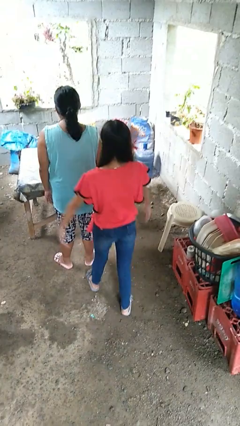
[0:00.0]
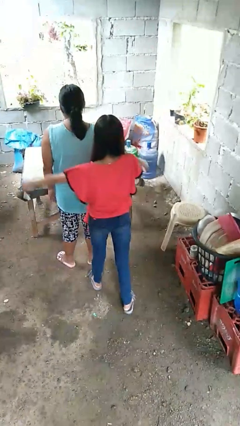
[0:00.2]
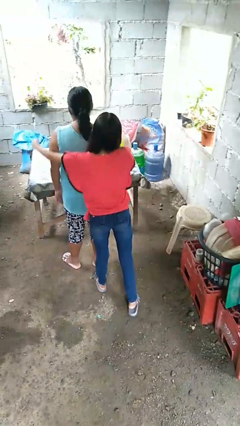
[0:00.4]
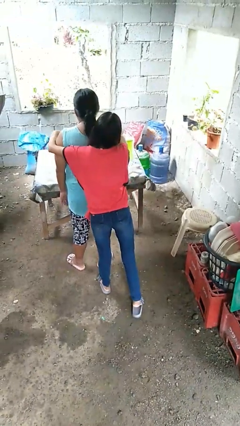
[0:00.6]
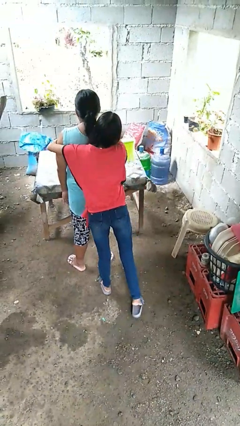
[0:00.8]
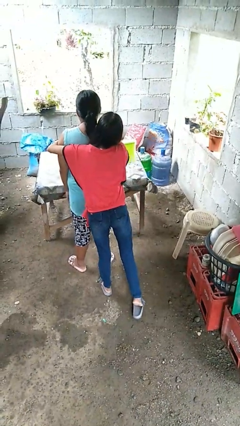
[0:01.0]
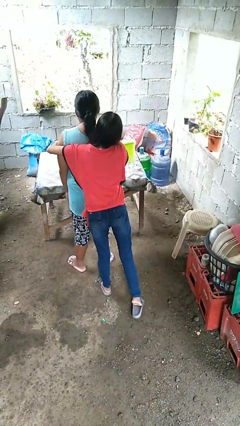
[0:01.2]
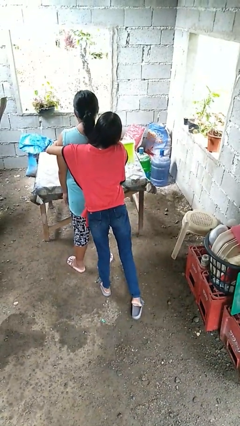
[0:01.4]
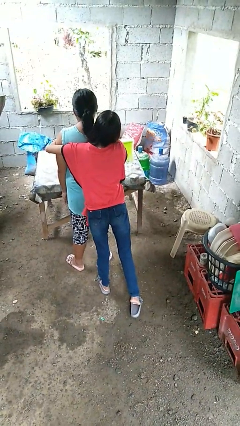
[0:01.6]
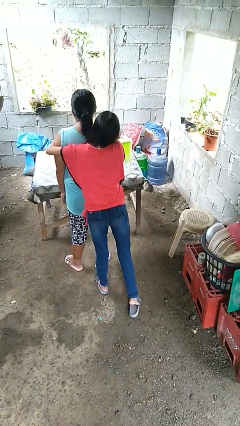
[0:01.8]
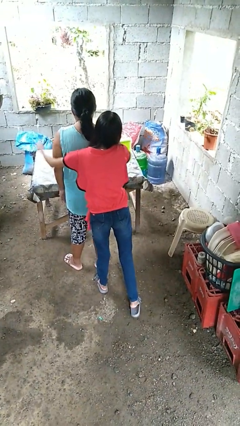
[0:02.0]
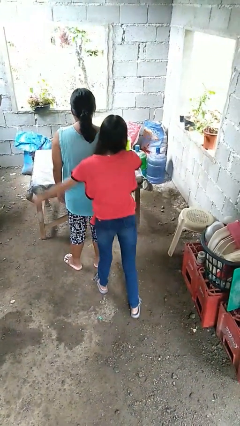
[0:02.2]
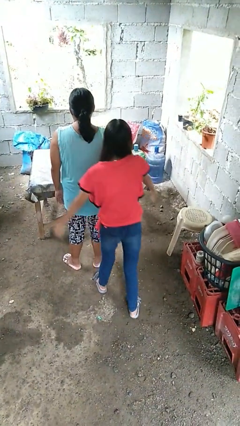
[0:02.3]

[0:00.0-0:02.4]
person hugs person from behind

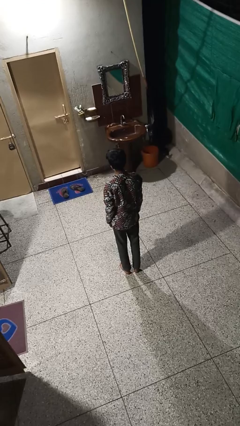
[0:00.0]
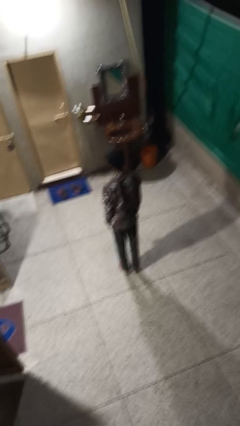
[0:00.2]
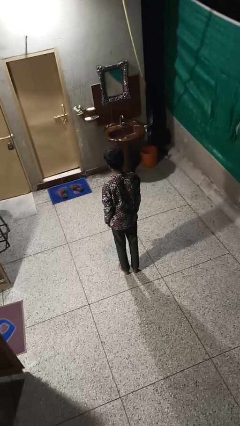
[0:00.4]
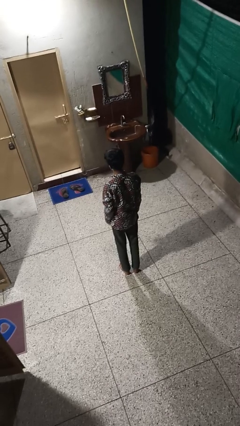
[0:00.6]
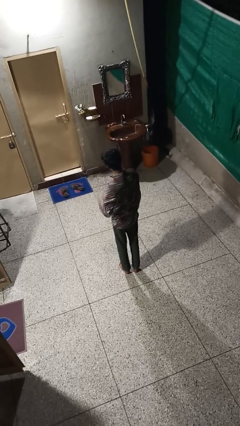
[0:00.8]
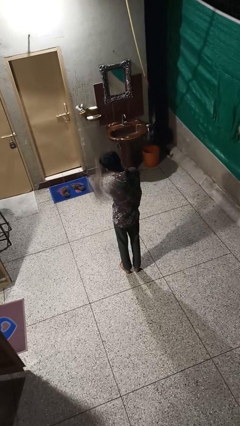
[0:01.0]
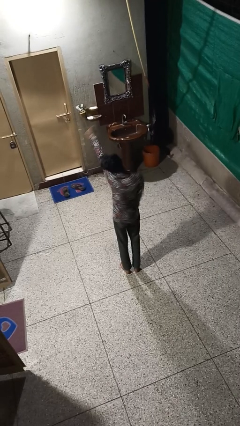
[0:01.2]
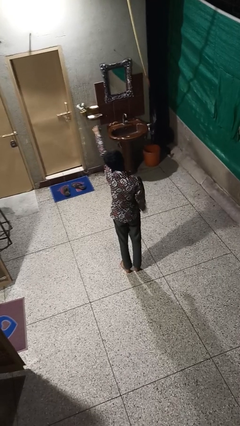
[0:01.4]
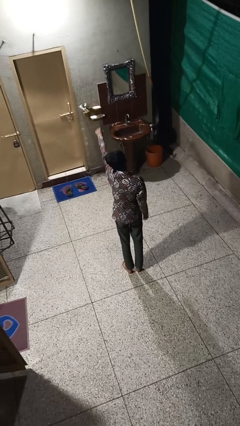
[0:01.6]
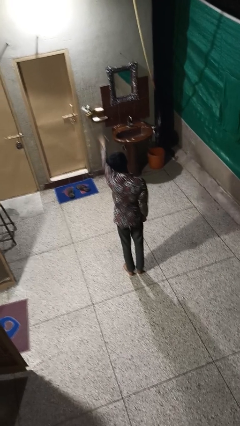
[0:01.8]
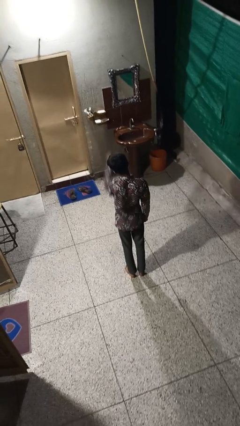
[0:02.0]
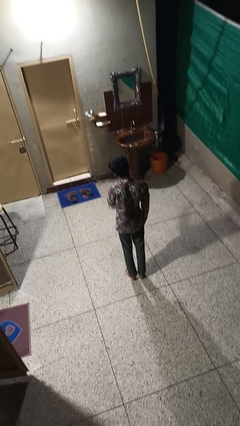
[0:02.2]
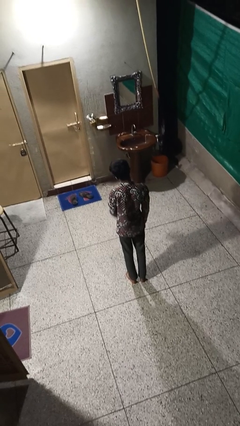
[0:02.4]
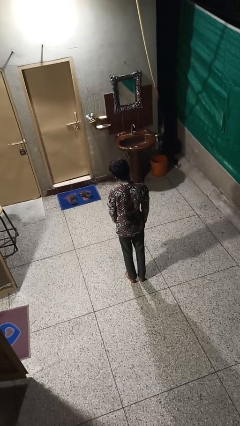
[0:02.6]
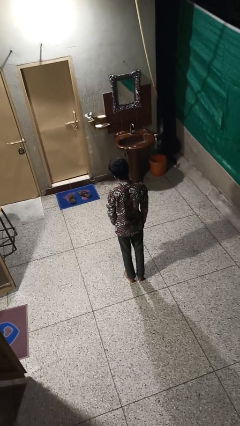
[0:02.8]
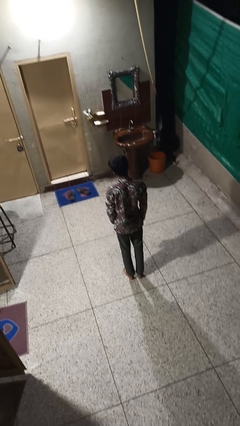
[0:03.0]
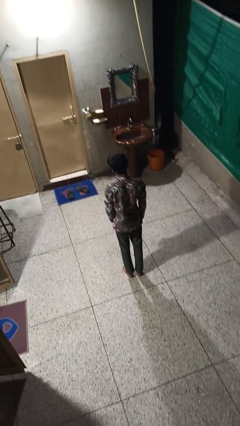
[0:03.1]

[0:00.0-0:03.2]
person punches

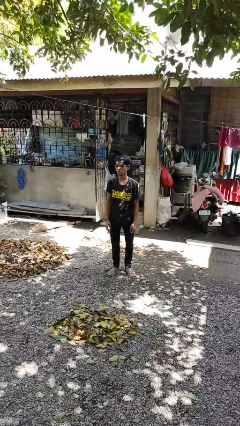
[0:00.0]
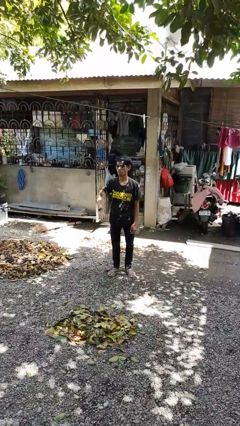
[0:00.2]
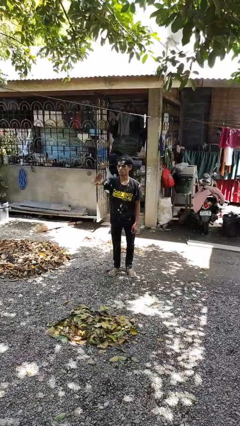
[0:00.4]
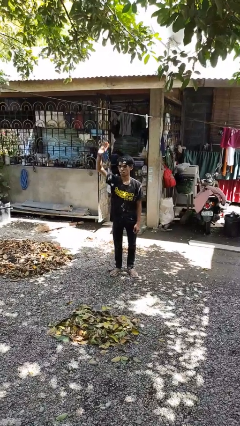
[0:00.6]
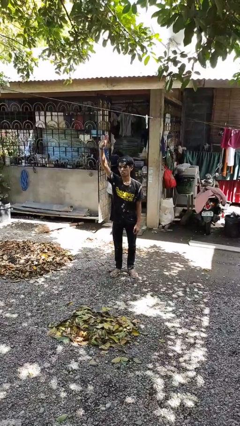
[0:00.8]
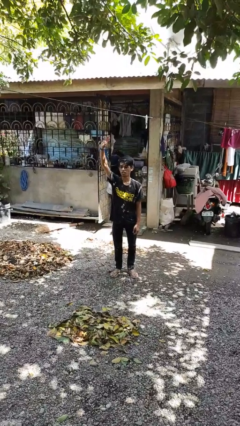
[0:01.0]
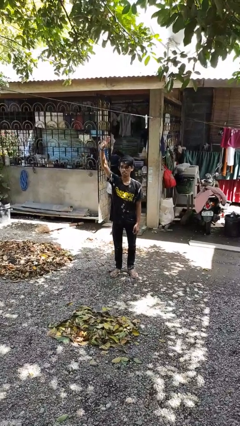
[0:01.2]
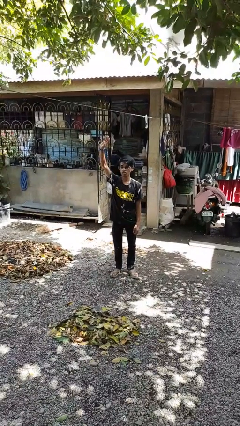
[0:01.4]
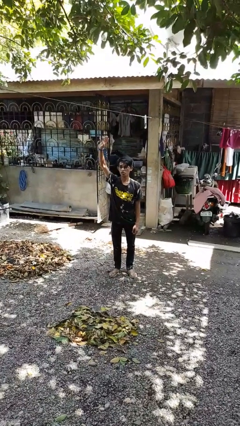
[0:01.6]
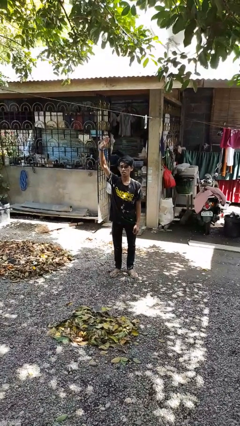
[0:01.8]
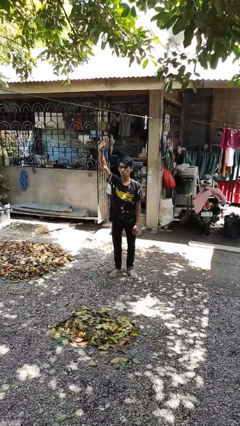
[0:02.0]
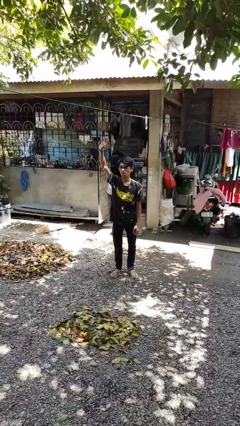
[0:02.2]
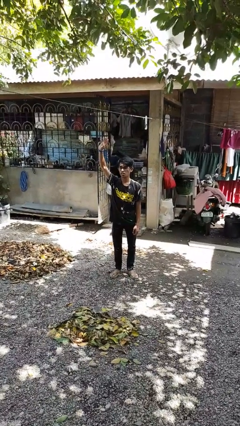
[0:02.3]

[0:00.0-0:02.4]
person gestures raise hand

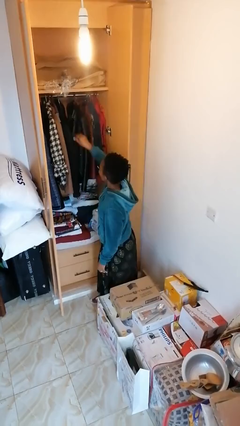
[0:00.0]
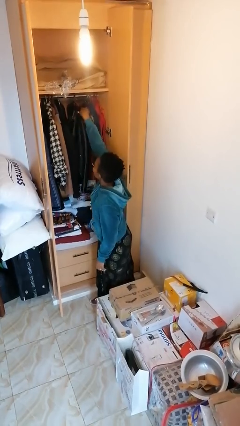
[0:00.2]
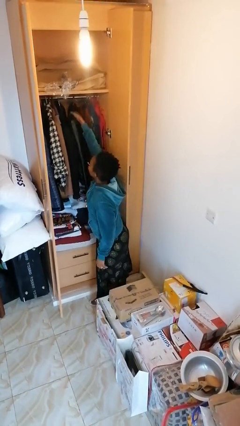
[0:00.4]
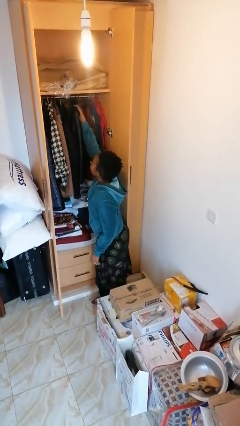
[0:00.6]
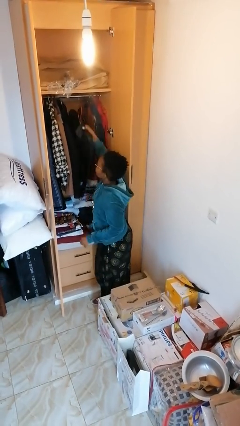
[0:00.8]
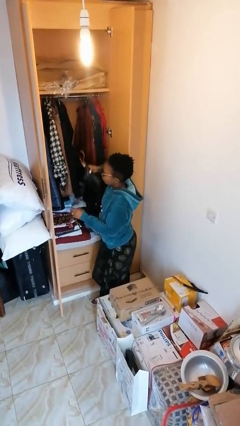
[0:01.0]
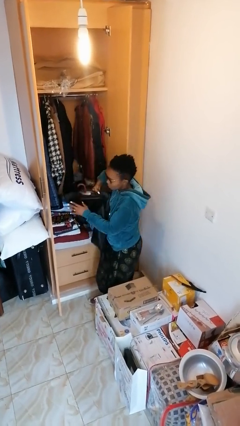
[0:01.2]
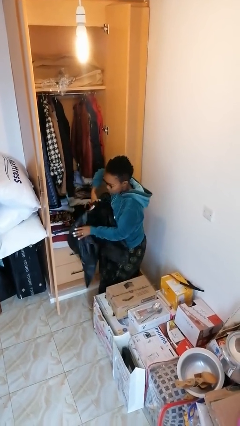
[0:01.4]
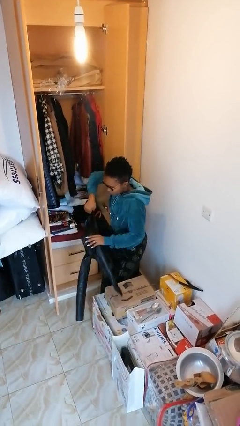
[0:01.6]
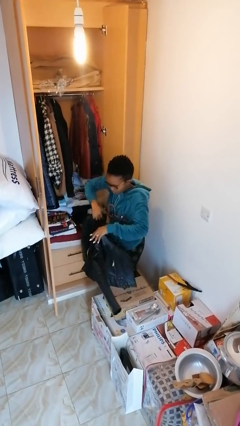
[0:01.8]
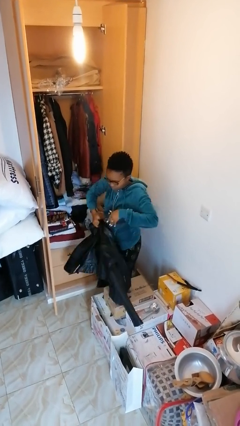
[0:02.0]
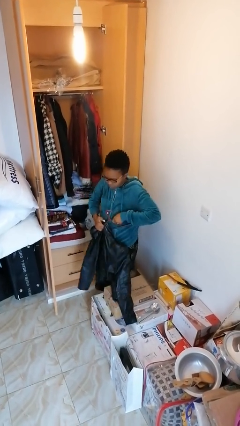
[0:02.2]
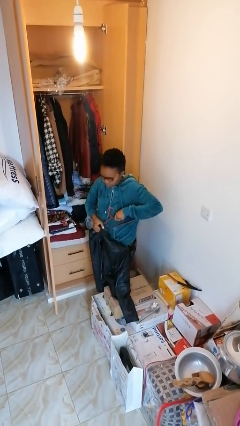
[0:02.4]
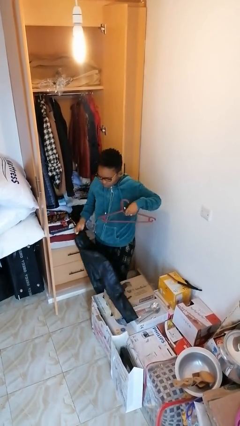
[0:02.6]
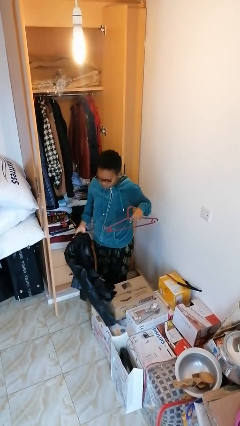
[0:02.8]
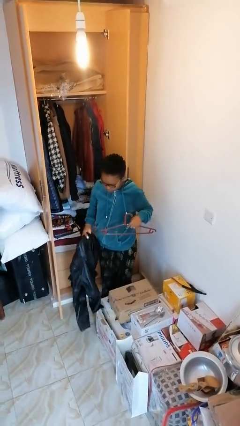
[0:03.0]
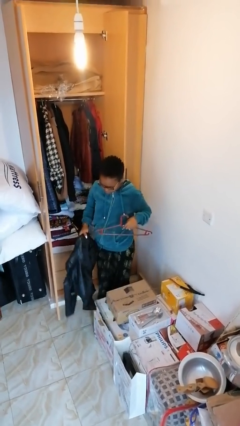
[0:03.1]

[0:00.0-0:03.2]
person takes clothes from closet

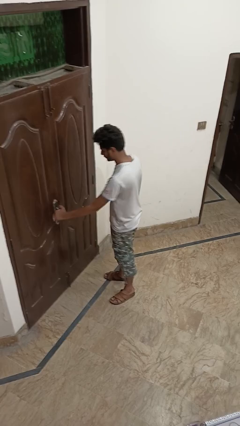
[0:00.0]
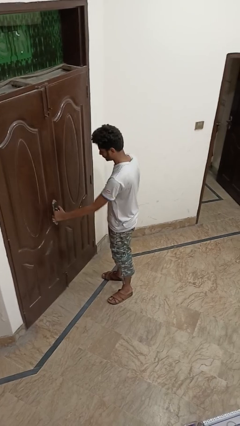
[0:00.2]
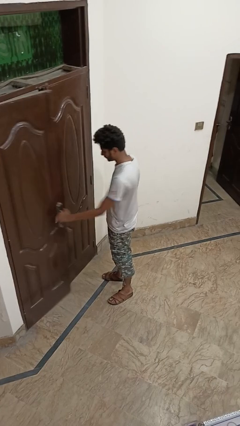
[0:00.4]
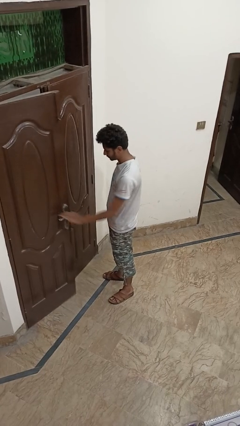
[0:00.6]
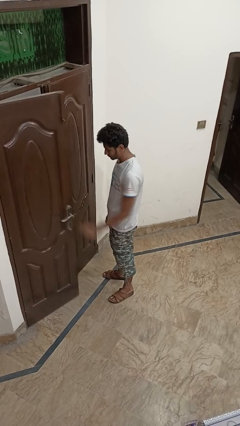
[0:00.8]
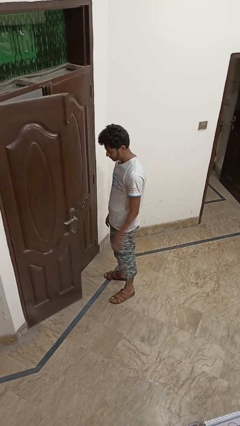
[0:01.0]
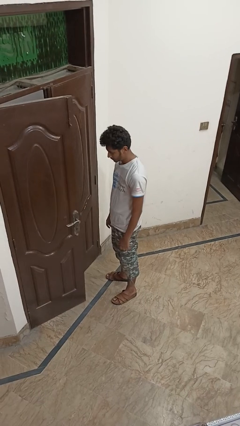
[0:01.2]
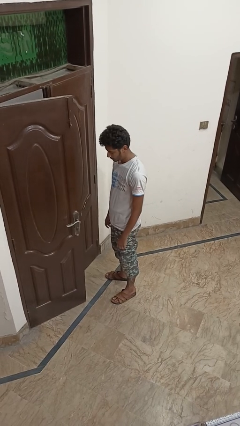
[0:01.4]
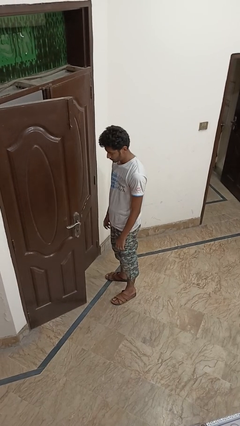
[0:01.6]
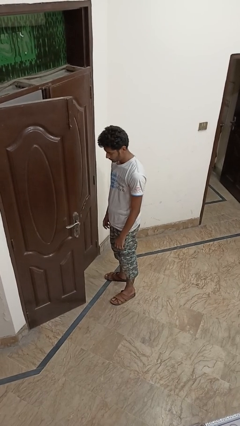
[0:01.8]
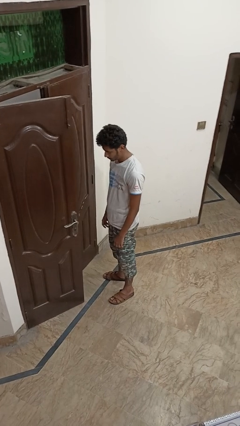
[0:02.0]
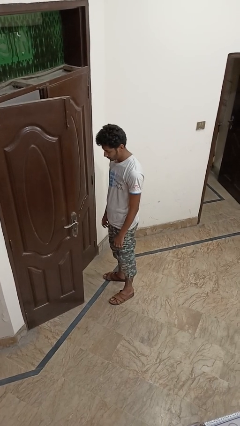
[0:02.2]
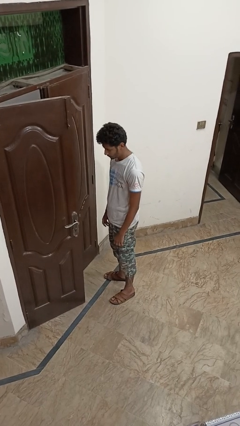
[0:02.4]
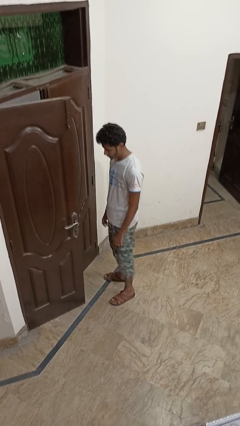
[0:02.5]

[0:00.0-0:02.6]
person opens facility door

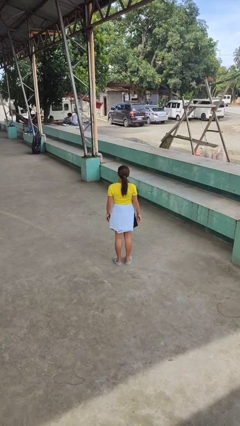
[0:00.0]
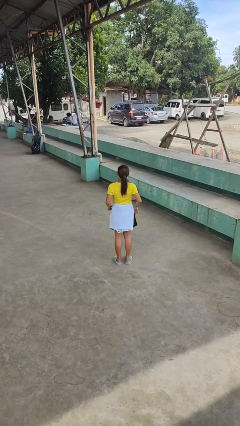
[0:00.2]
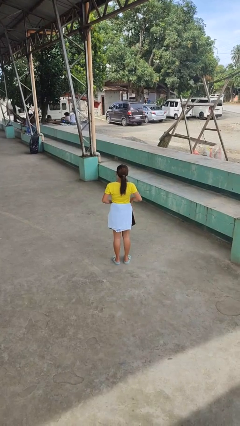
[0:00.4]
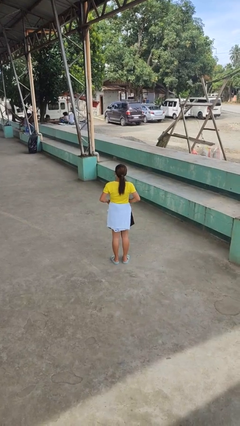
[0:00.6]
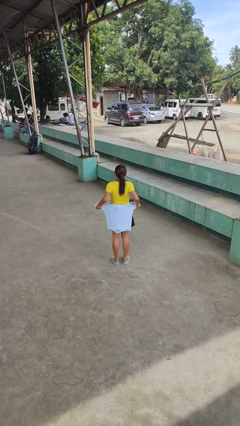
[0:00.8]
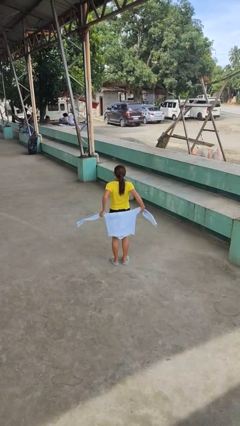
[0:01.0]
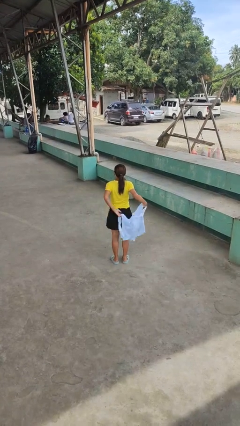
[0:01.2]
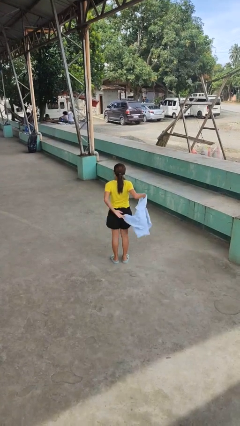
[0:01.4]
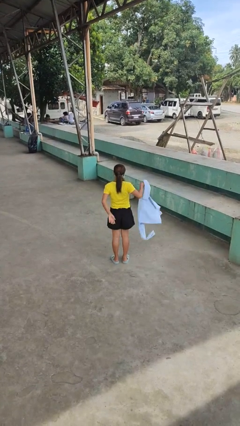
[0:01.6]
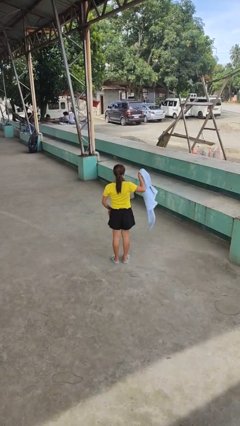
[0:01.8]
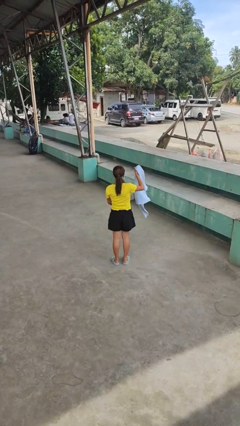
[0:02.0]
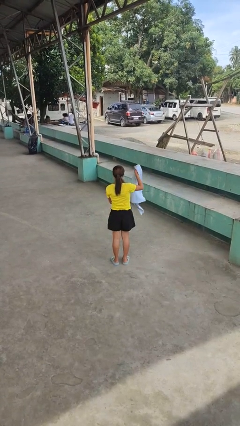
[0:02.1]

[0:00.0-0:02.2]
person unties jacket around waist

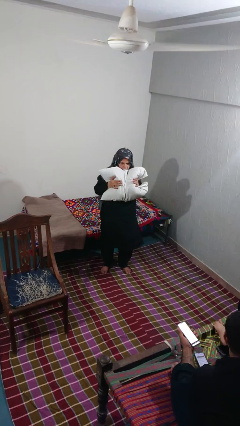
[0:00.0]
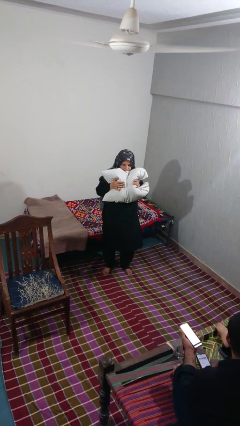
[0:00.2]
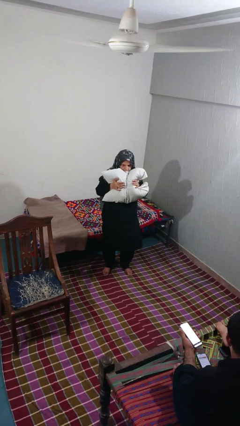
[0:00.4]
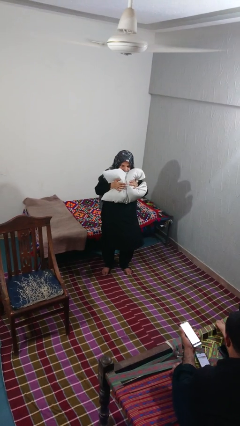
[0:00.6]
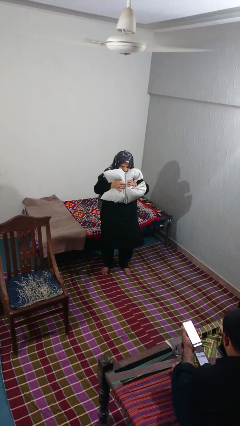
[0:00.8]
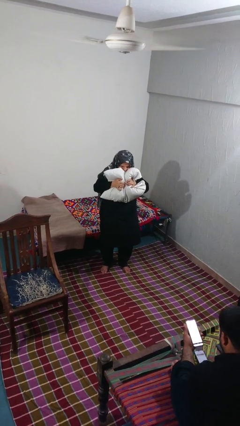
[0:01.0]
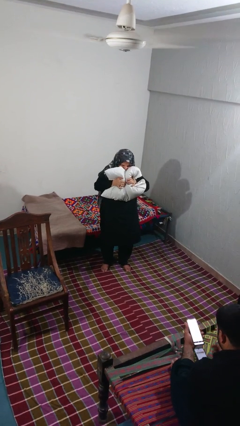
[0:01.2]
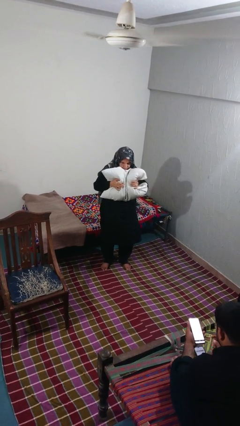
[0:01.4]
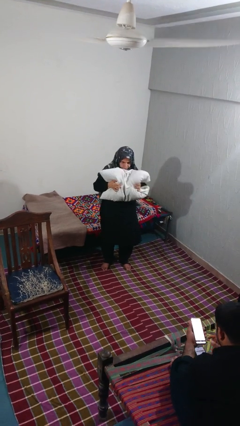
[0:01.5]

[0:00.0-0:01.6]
person squeezes object
